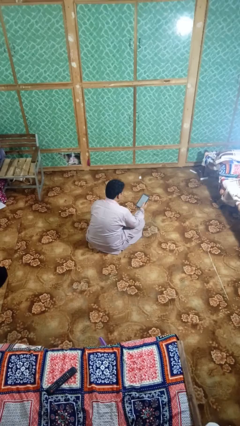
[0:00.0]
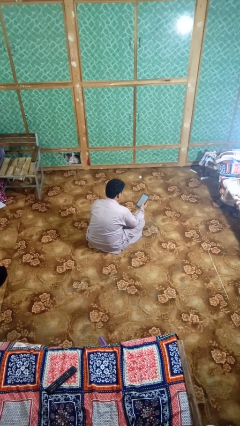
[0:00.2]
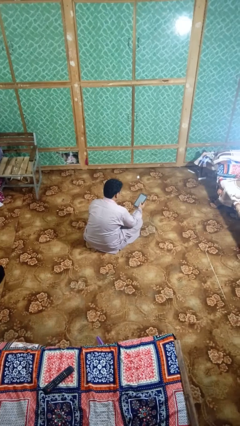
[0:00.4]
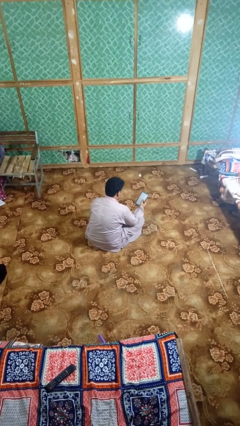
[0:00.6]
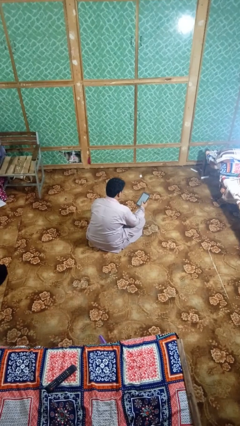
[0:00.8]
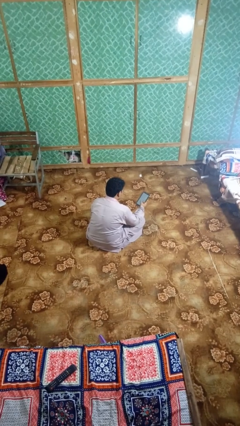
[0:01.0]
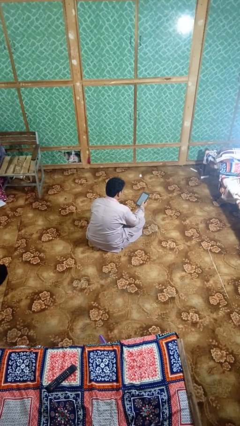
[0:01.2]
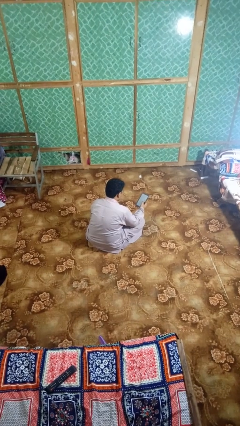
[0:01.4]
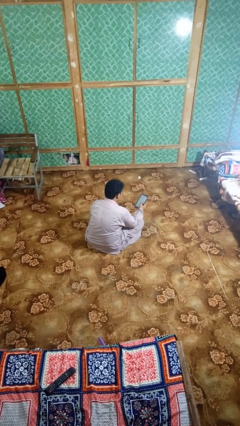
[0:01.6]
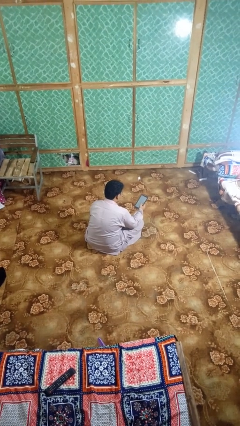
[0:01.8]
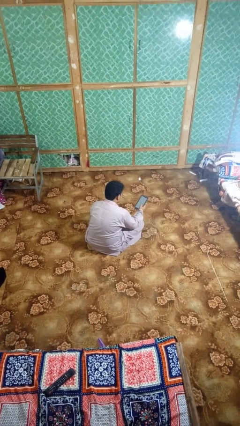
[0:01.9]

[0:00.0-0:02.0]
person interacts with tablet

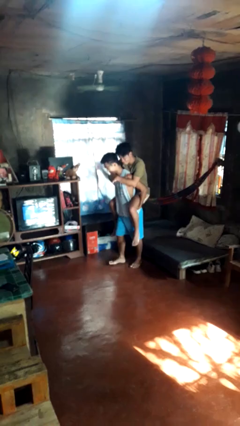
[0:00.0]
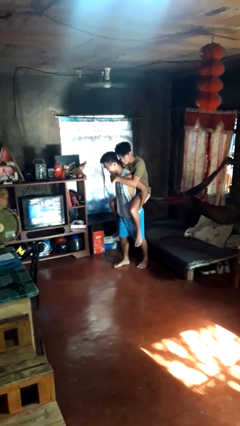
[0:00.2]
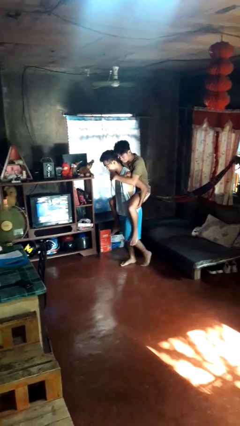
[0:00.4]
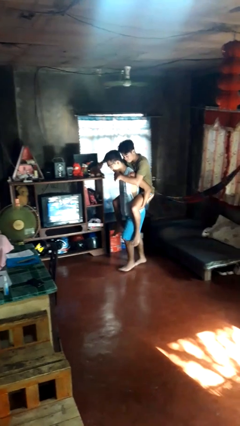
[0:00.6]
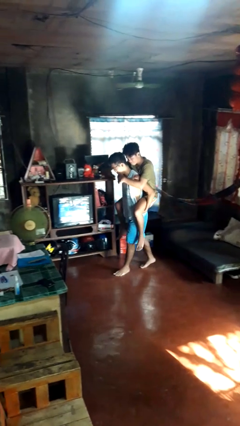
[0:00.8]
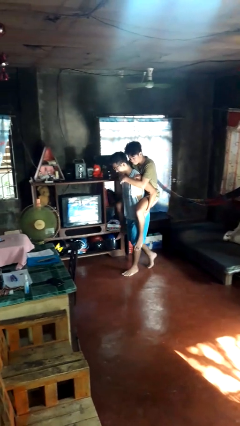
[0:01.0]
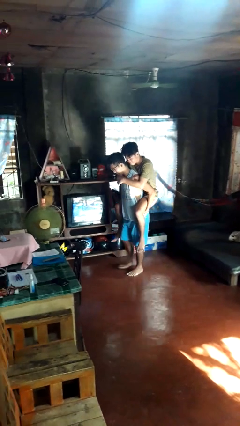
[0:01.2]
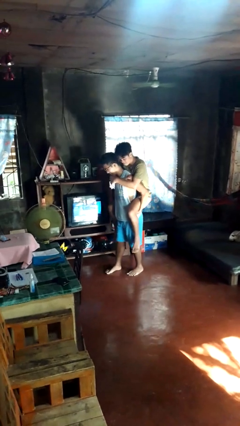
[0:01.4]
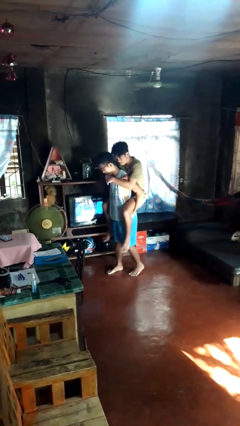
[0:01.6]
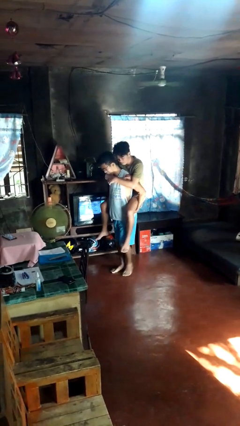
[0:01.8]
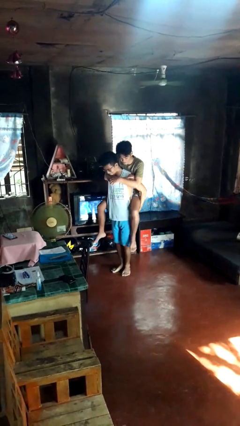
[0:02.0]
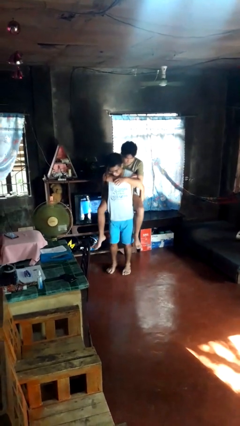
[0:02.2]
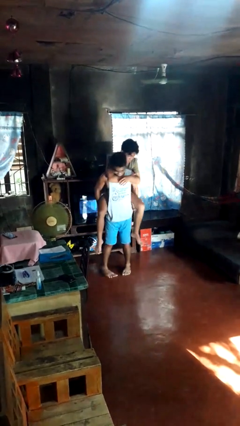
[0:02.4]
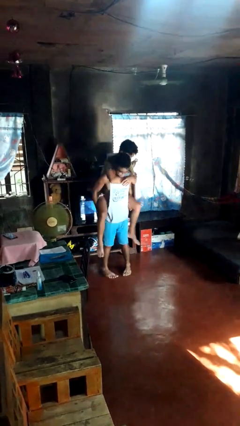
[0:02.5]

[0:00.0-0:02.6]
person carries person on back

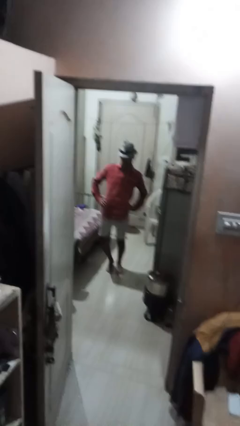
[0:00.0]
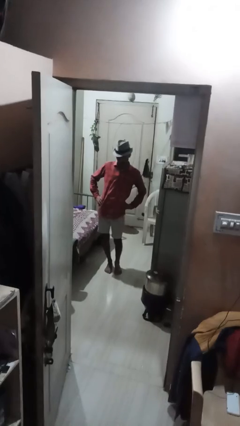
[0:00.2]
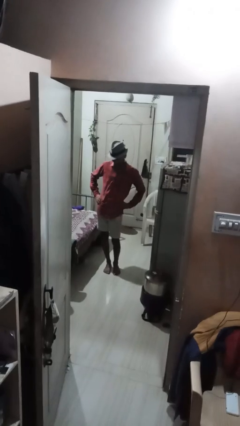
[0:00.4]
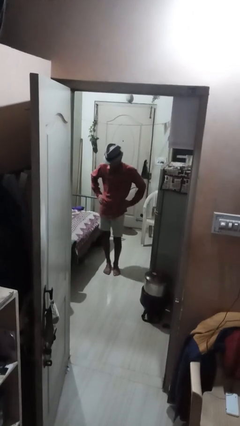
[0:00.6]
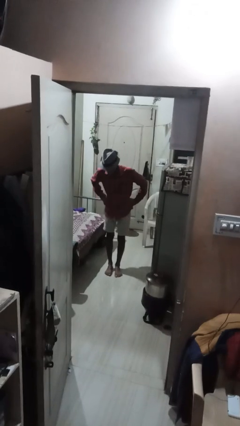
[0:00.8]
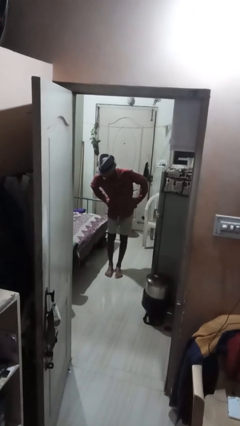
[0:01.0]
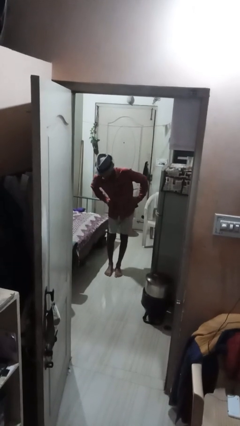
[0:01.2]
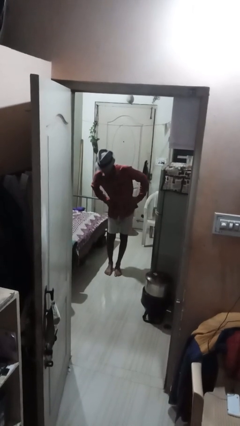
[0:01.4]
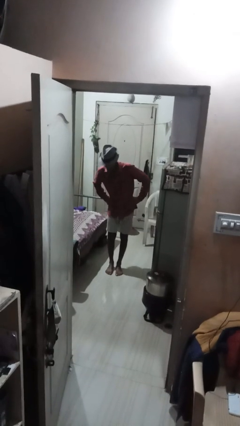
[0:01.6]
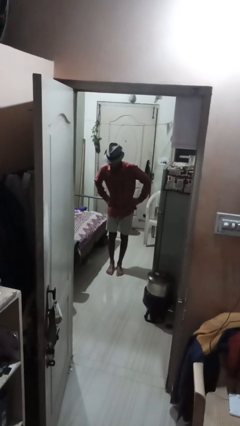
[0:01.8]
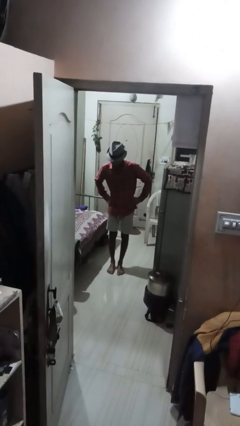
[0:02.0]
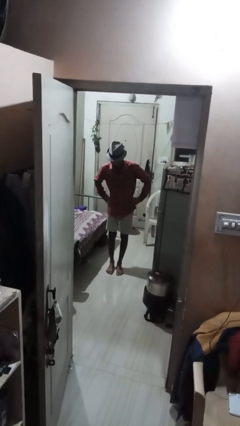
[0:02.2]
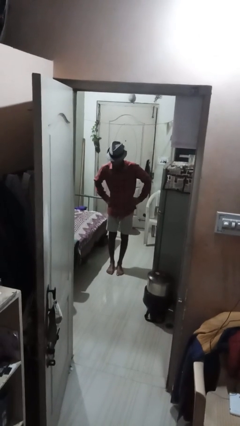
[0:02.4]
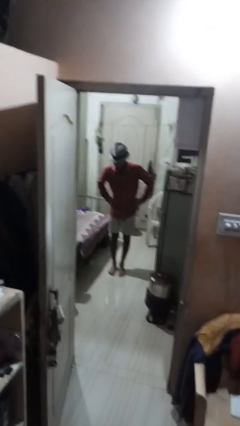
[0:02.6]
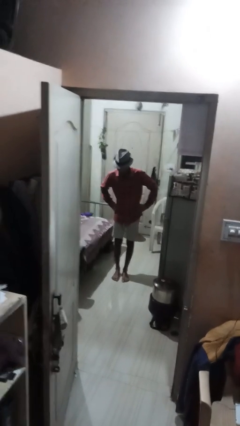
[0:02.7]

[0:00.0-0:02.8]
person wiggles hips

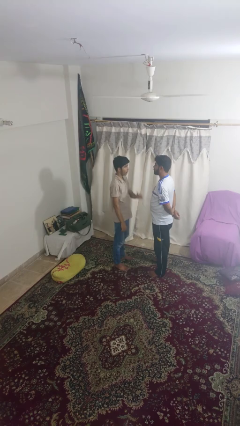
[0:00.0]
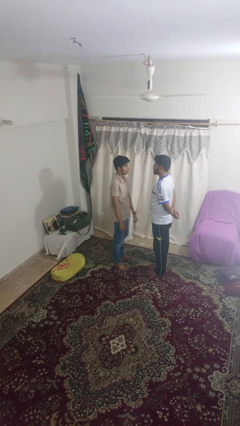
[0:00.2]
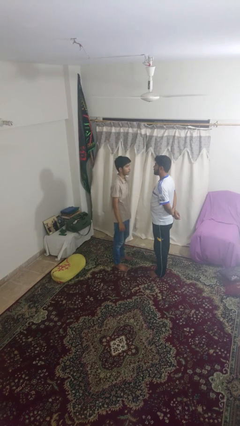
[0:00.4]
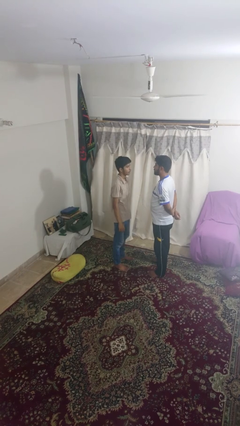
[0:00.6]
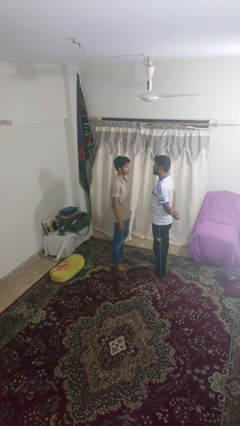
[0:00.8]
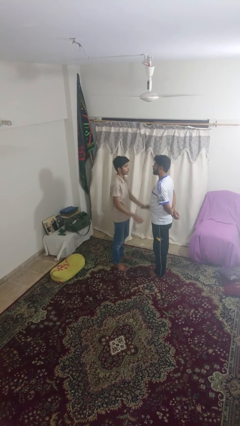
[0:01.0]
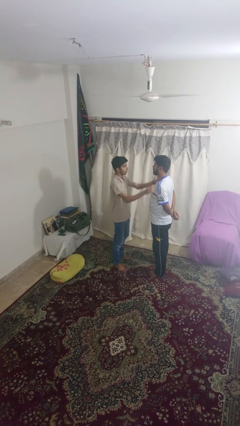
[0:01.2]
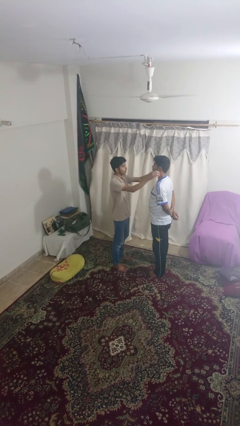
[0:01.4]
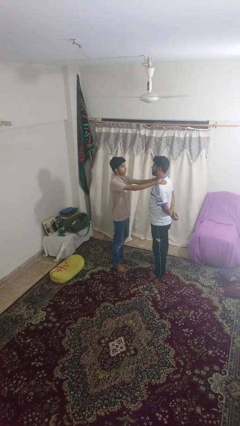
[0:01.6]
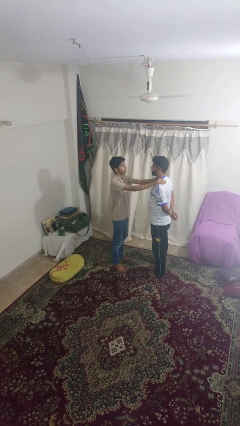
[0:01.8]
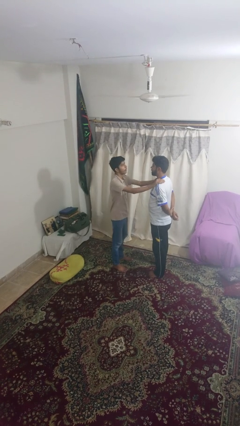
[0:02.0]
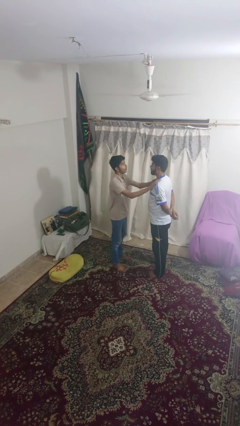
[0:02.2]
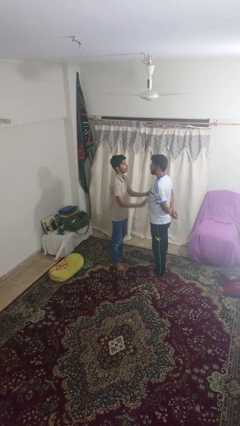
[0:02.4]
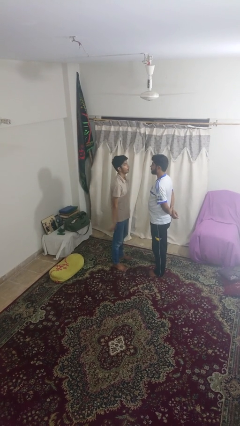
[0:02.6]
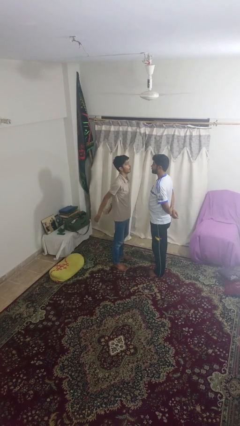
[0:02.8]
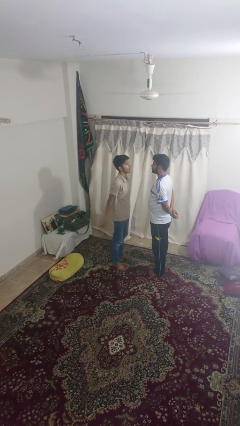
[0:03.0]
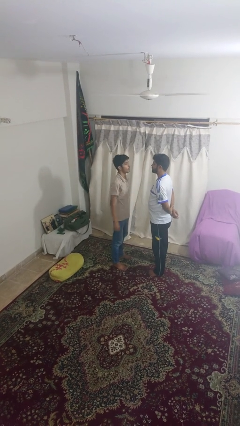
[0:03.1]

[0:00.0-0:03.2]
person pounds shoulders of person

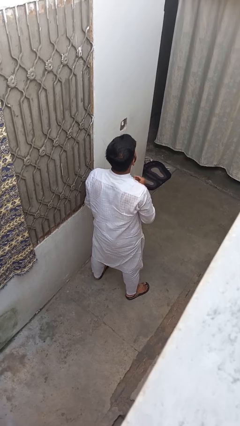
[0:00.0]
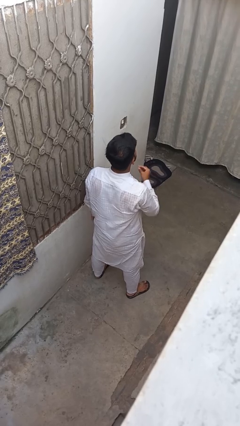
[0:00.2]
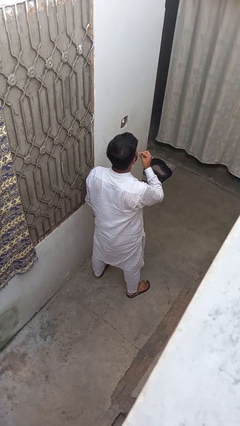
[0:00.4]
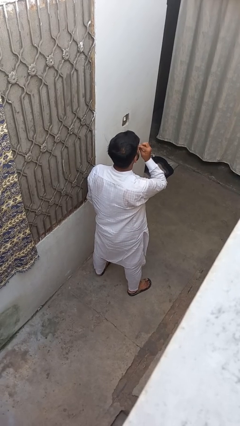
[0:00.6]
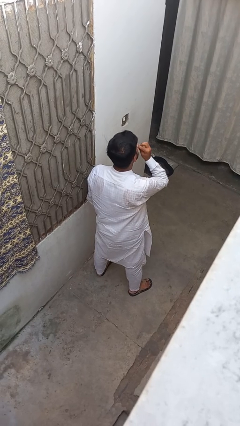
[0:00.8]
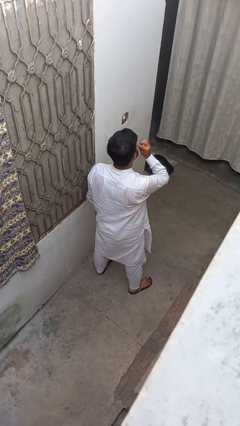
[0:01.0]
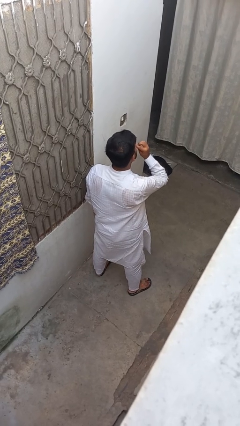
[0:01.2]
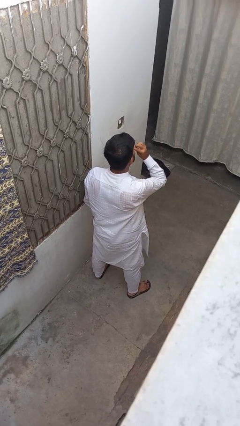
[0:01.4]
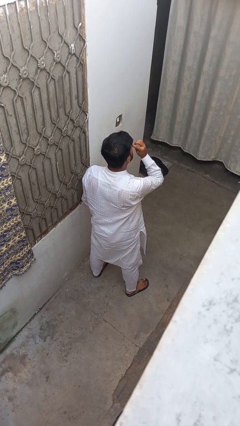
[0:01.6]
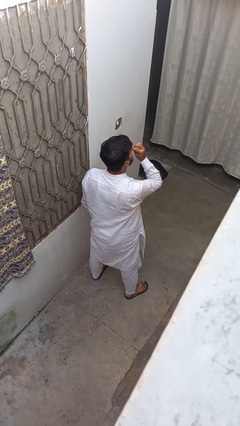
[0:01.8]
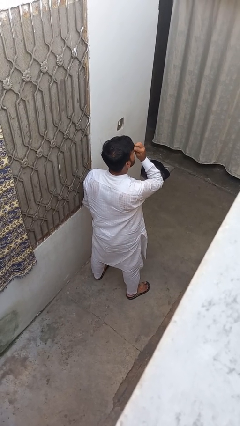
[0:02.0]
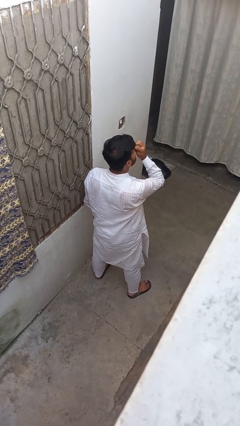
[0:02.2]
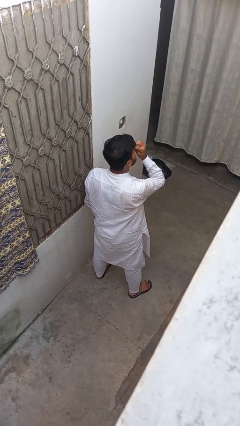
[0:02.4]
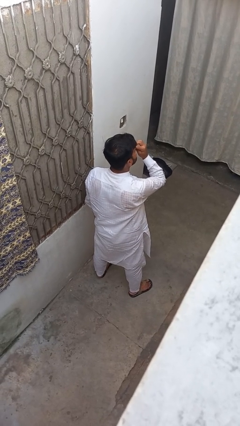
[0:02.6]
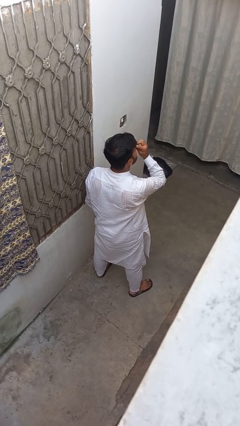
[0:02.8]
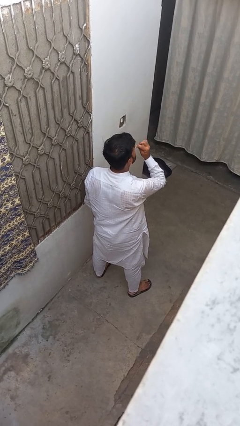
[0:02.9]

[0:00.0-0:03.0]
person flosses

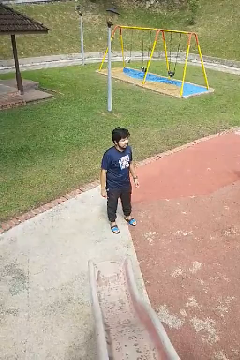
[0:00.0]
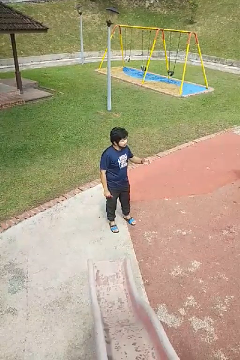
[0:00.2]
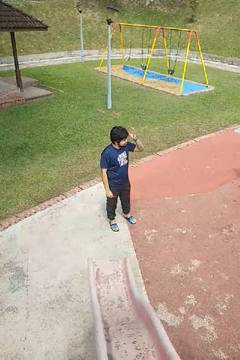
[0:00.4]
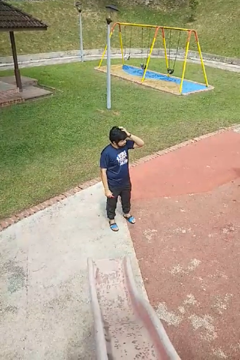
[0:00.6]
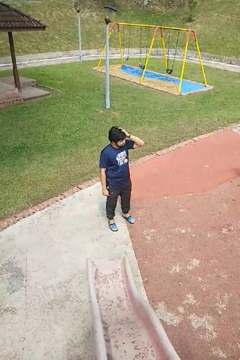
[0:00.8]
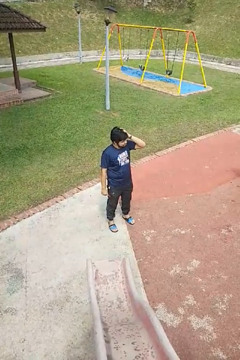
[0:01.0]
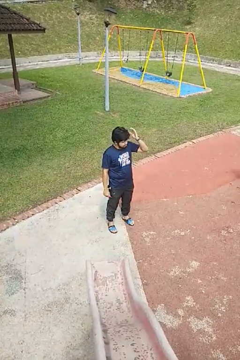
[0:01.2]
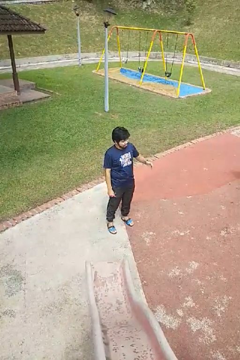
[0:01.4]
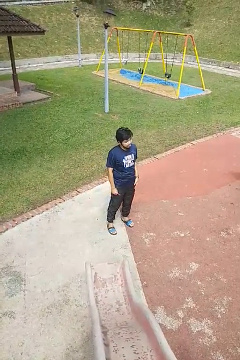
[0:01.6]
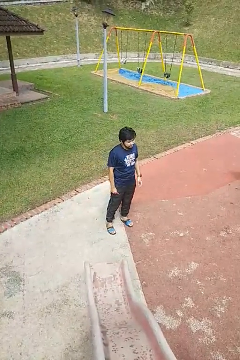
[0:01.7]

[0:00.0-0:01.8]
person pats head

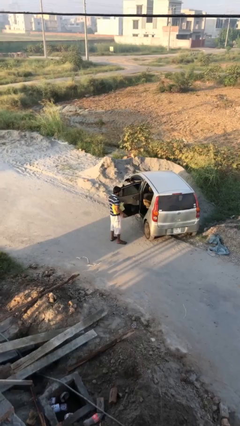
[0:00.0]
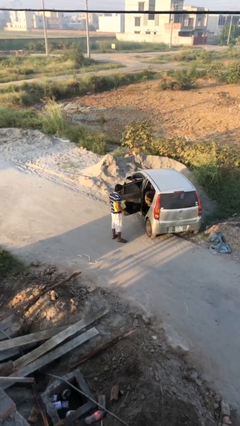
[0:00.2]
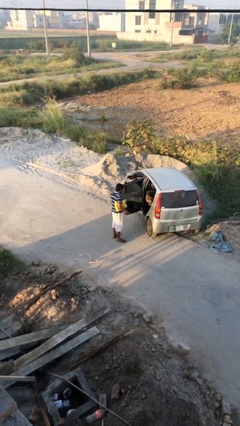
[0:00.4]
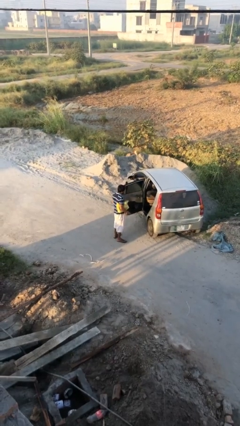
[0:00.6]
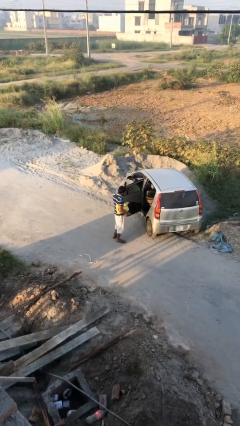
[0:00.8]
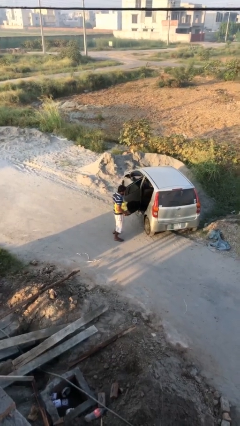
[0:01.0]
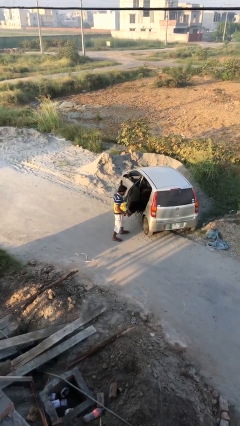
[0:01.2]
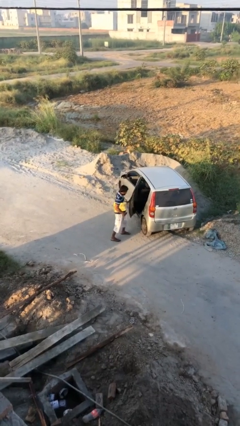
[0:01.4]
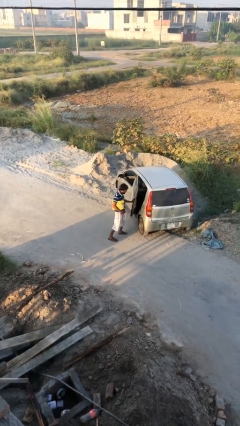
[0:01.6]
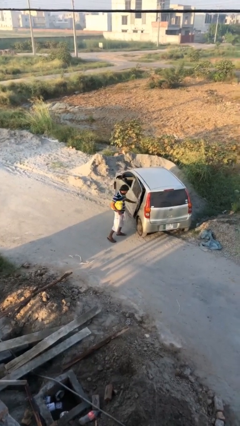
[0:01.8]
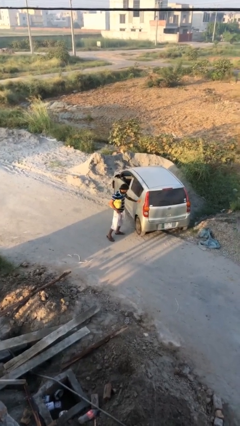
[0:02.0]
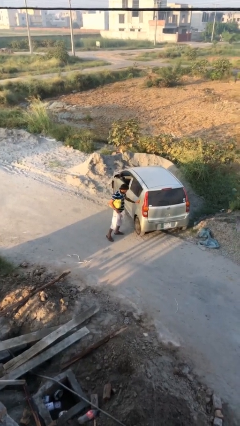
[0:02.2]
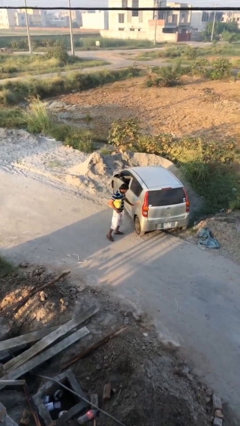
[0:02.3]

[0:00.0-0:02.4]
person closes car door
